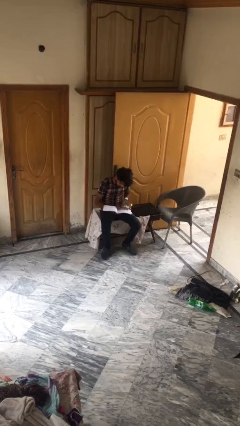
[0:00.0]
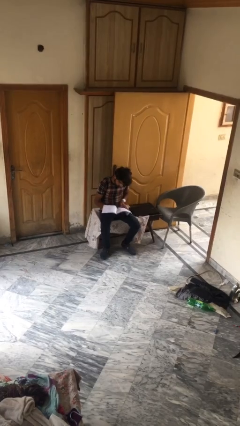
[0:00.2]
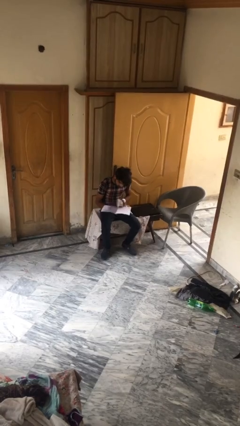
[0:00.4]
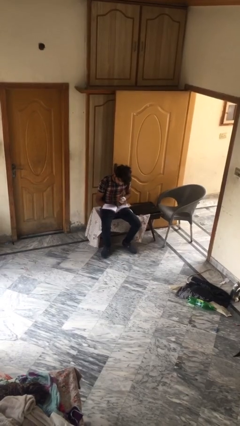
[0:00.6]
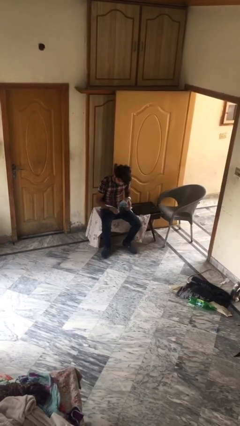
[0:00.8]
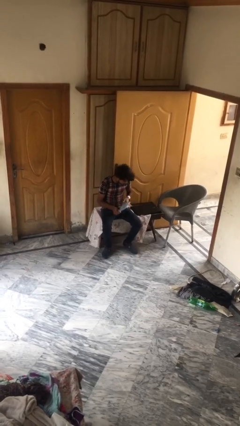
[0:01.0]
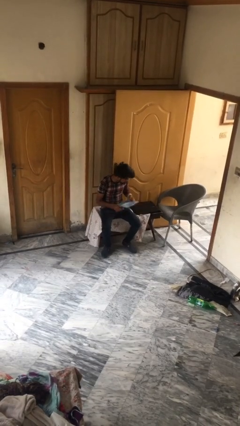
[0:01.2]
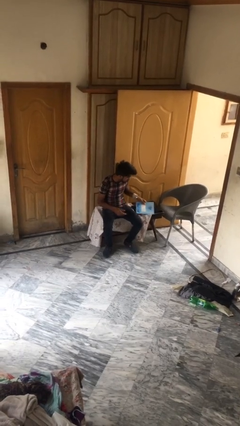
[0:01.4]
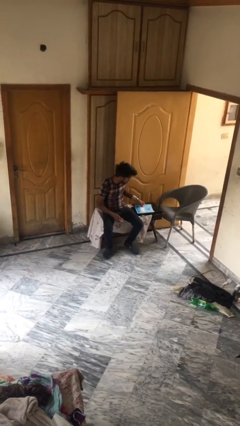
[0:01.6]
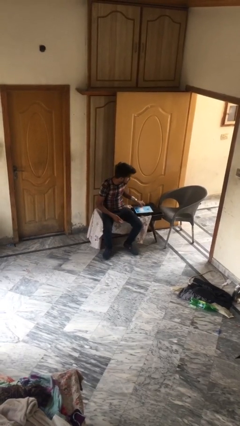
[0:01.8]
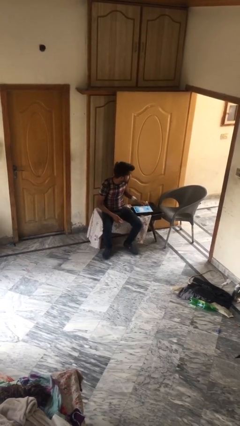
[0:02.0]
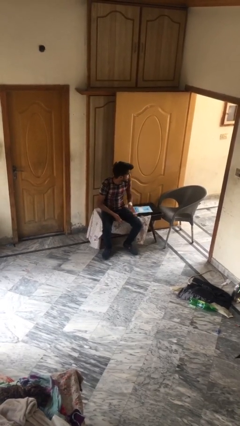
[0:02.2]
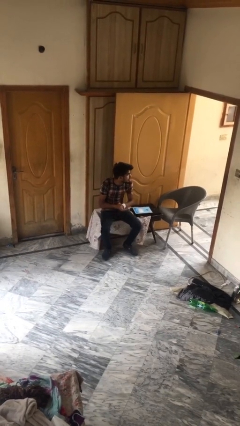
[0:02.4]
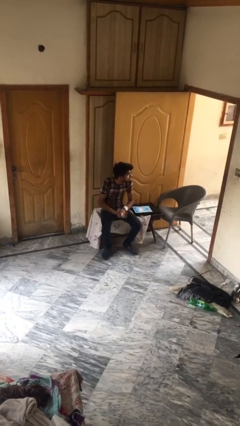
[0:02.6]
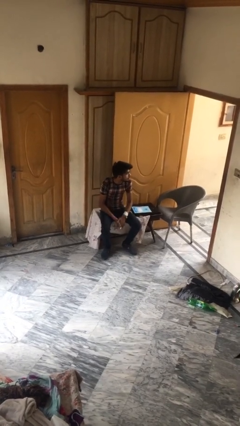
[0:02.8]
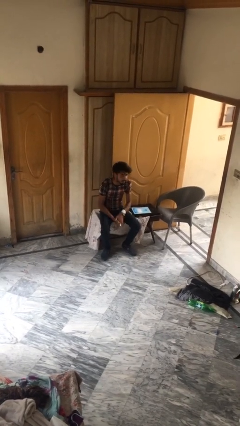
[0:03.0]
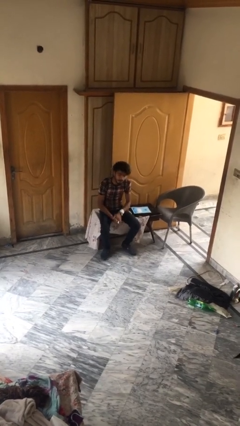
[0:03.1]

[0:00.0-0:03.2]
person puts down object on table

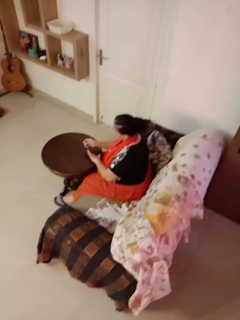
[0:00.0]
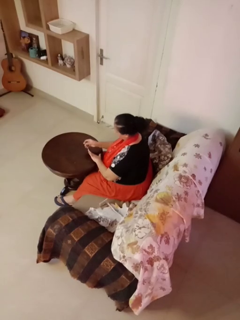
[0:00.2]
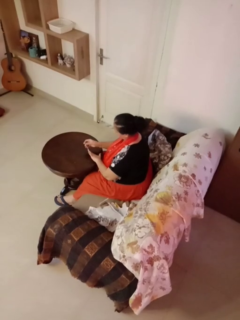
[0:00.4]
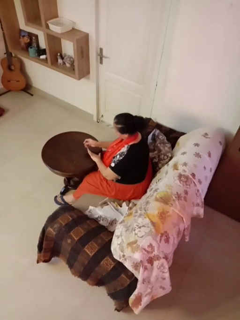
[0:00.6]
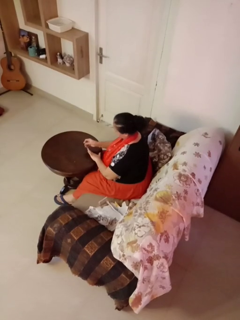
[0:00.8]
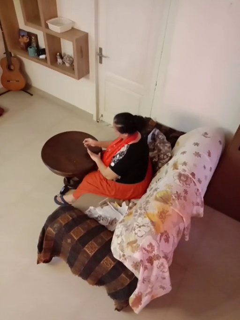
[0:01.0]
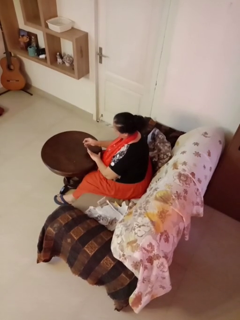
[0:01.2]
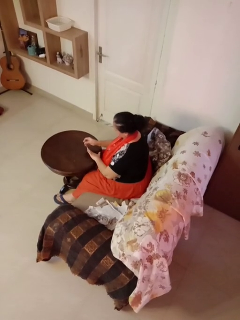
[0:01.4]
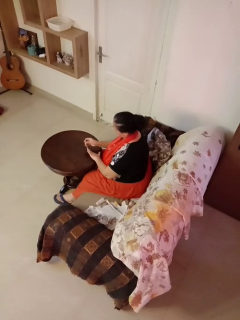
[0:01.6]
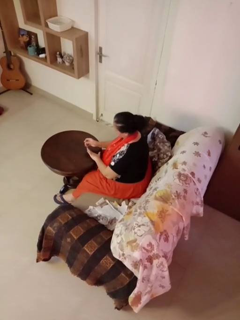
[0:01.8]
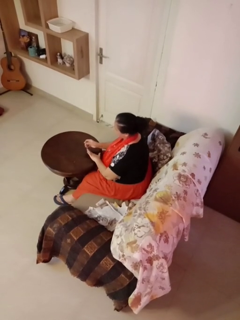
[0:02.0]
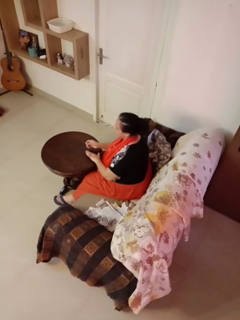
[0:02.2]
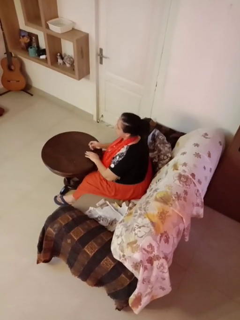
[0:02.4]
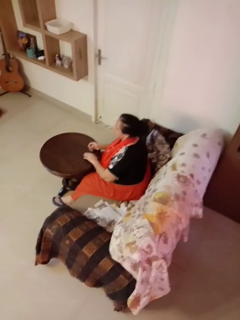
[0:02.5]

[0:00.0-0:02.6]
person clips fingernails

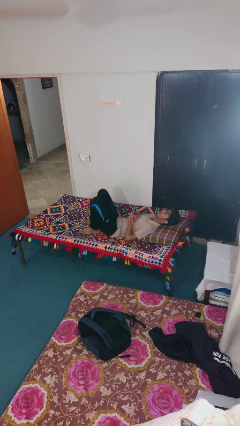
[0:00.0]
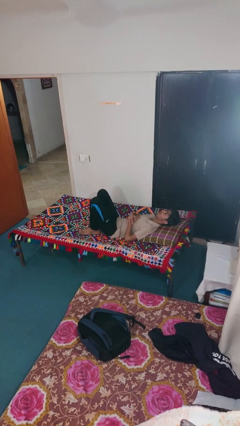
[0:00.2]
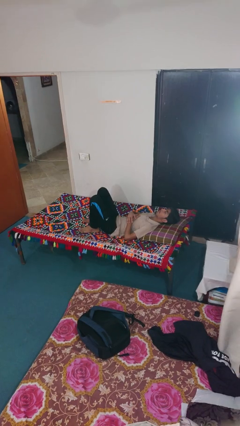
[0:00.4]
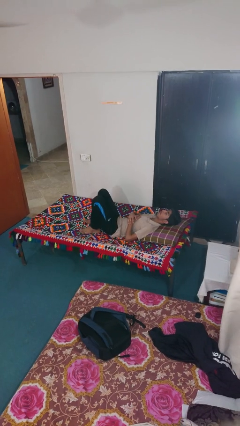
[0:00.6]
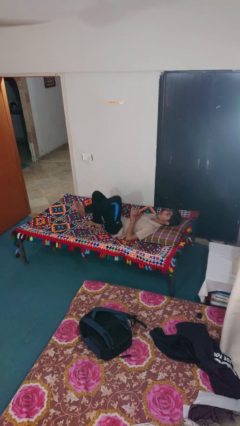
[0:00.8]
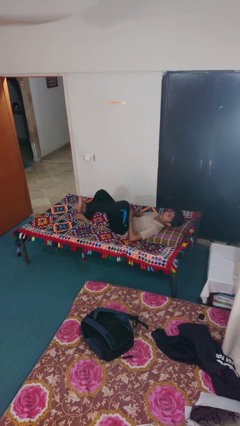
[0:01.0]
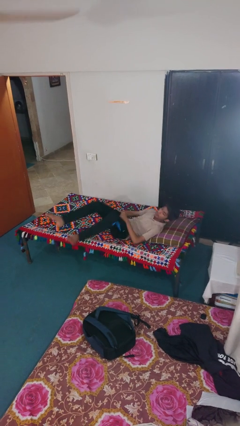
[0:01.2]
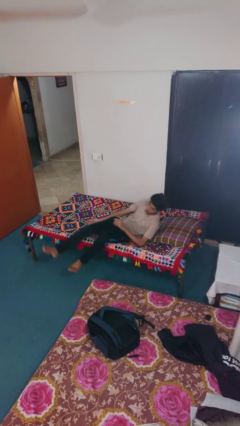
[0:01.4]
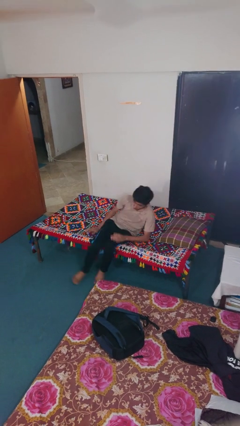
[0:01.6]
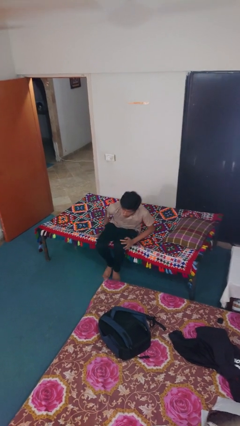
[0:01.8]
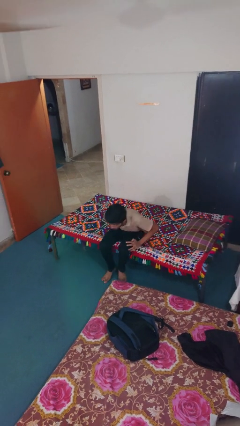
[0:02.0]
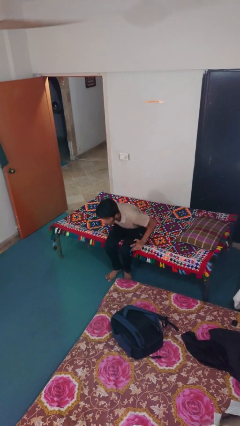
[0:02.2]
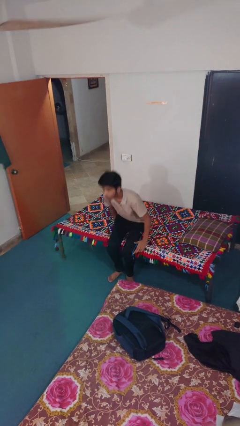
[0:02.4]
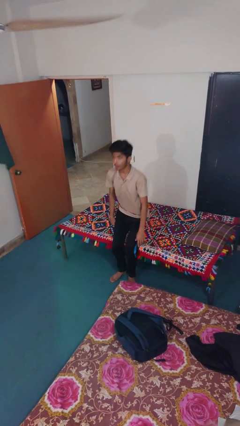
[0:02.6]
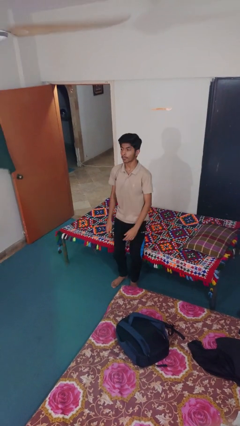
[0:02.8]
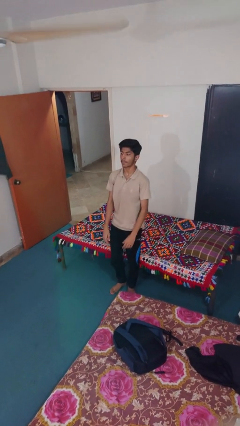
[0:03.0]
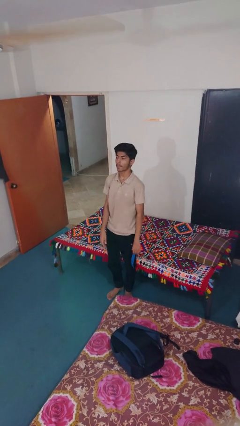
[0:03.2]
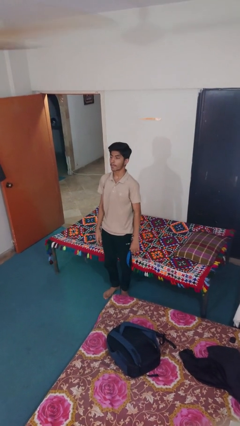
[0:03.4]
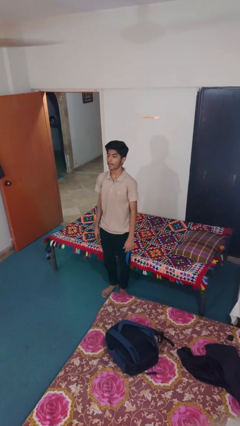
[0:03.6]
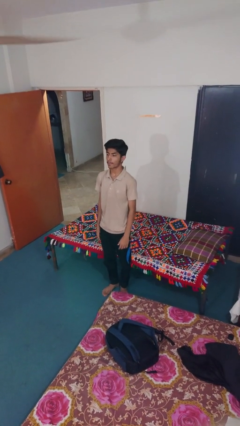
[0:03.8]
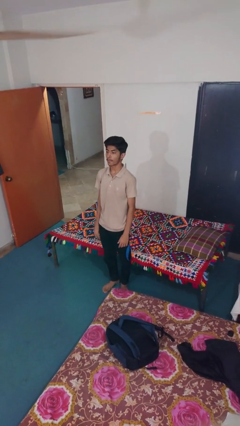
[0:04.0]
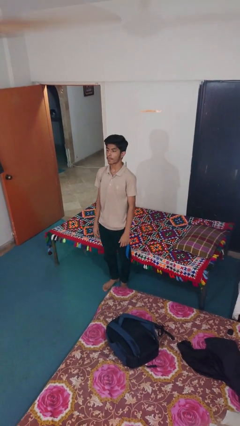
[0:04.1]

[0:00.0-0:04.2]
person stands up

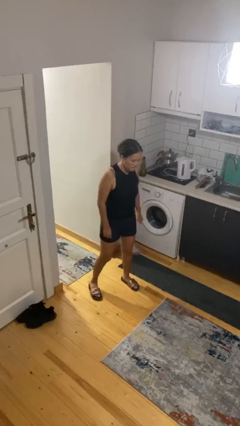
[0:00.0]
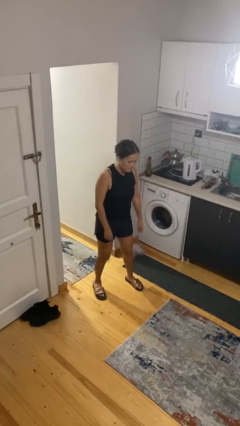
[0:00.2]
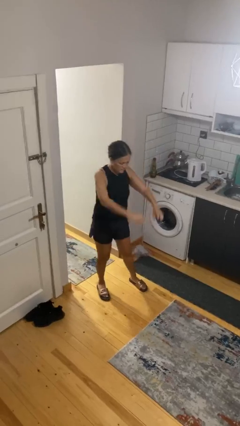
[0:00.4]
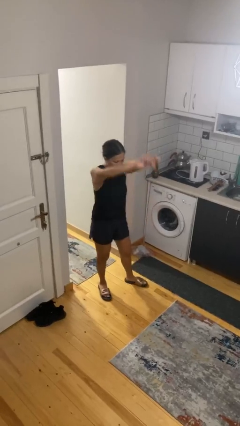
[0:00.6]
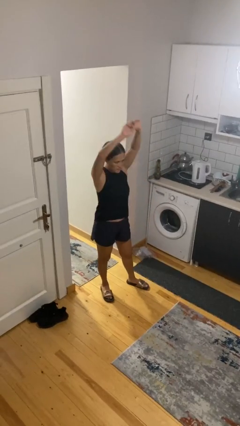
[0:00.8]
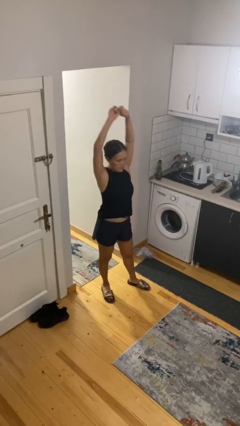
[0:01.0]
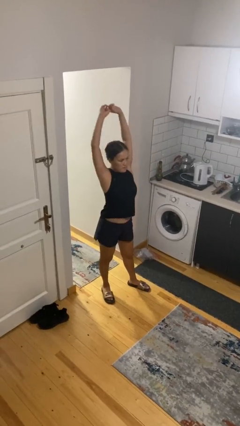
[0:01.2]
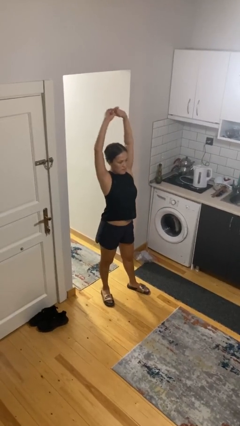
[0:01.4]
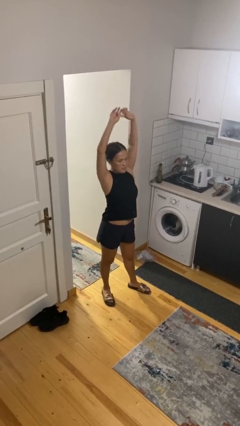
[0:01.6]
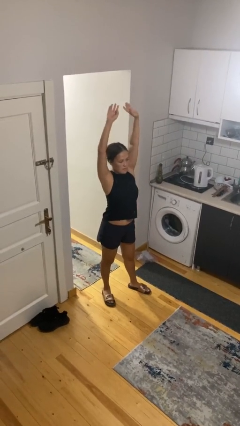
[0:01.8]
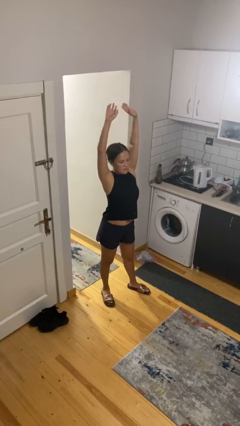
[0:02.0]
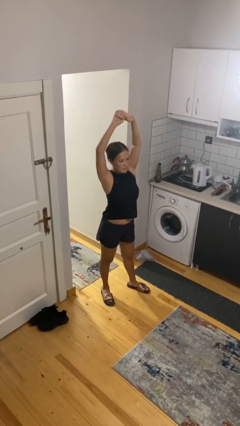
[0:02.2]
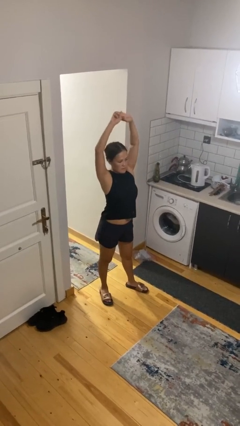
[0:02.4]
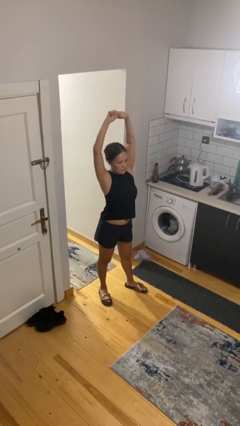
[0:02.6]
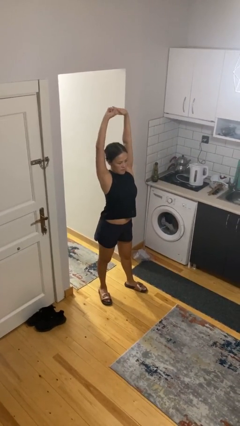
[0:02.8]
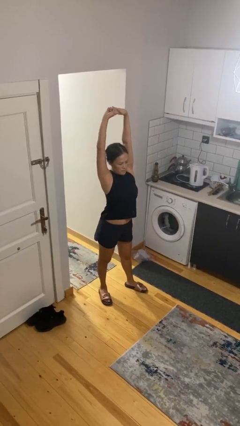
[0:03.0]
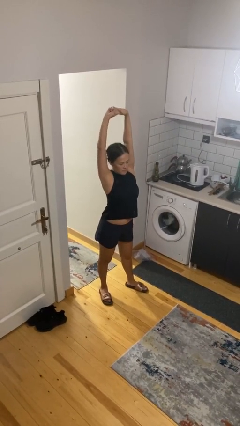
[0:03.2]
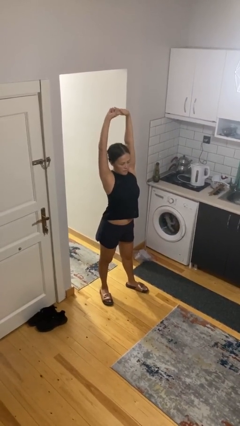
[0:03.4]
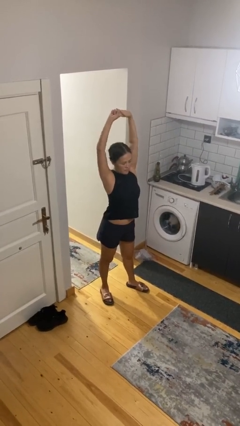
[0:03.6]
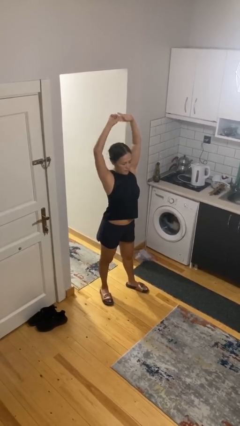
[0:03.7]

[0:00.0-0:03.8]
person stretches arms over head

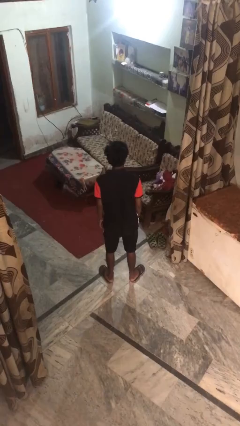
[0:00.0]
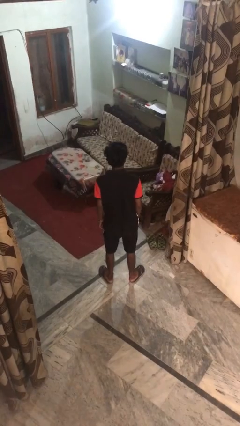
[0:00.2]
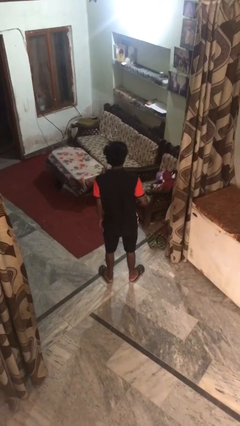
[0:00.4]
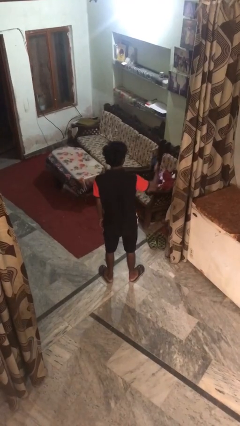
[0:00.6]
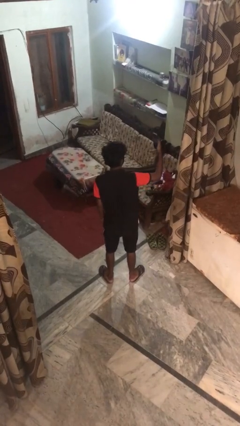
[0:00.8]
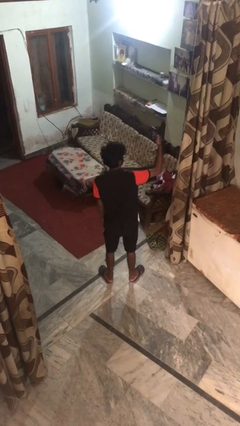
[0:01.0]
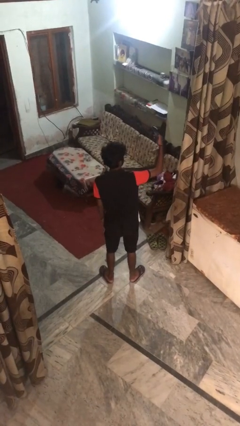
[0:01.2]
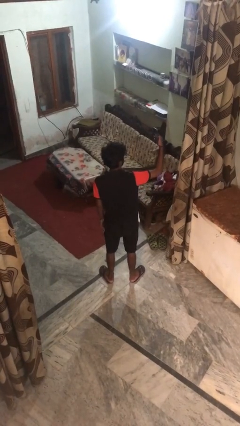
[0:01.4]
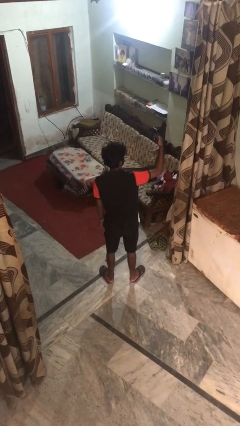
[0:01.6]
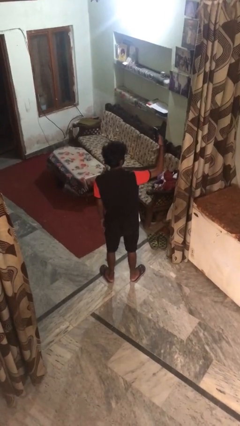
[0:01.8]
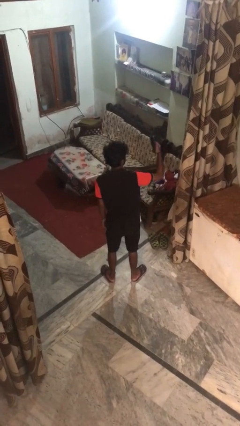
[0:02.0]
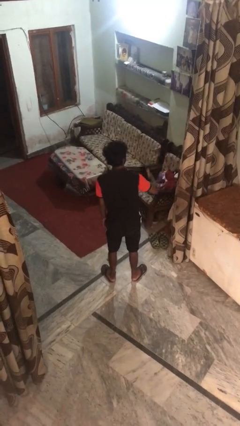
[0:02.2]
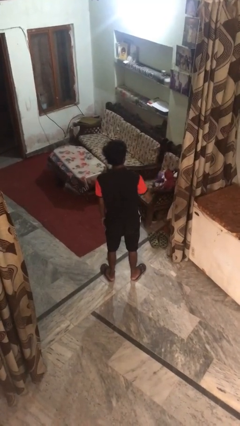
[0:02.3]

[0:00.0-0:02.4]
person takes selfie

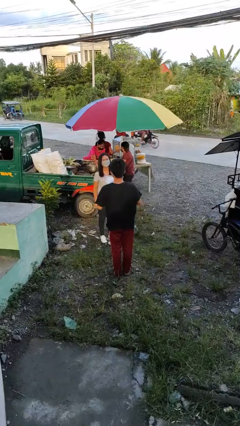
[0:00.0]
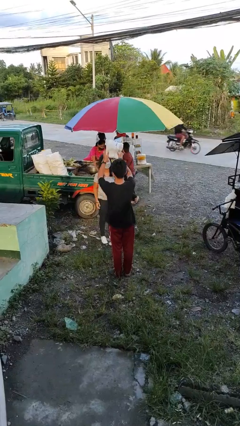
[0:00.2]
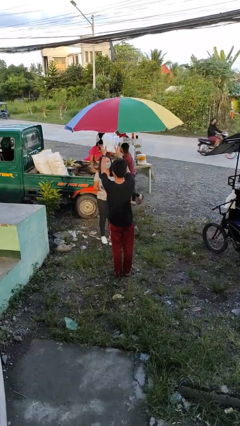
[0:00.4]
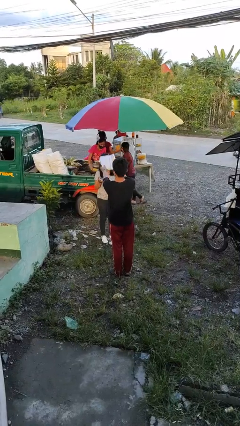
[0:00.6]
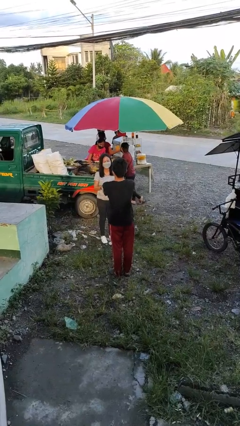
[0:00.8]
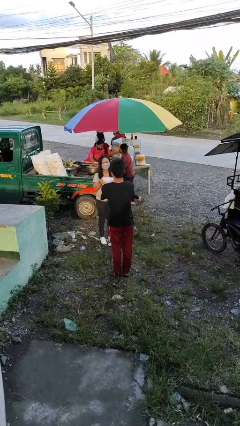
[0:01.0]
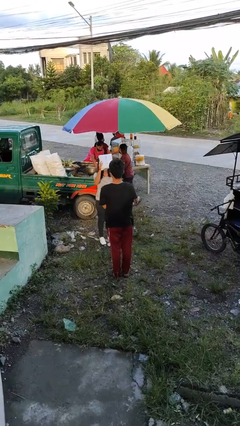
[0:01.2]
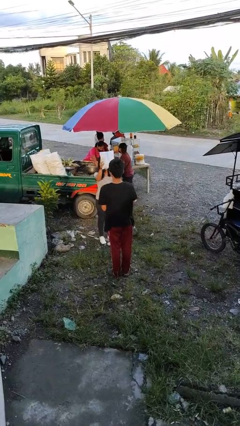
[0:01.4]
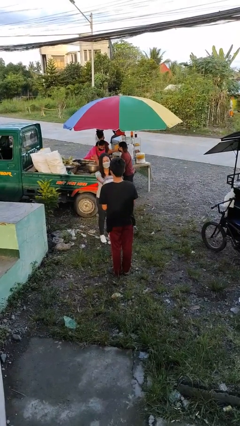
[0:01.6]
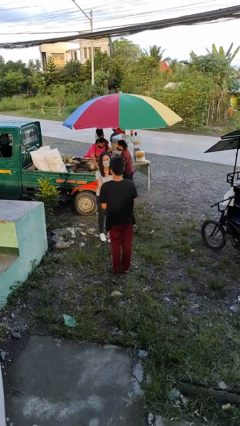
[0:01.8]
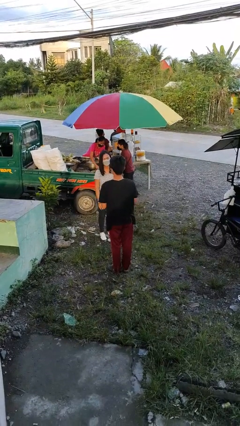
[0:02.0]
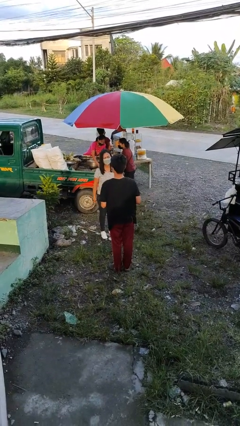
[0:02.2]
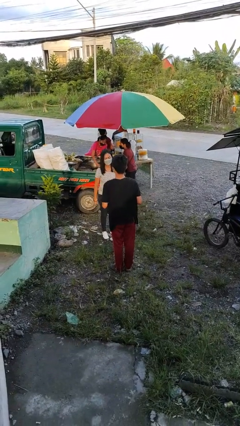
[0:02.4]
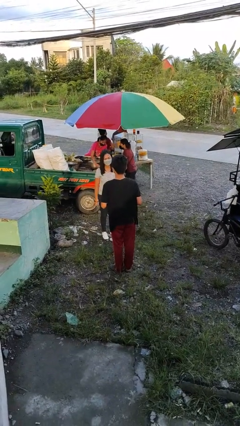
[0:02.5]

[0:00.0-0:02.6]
person transfers object to person
